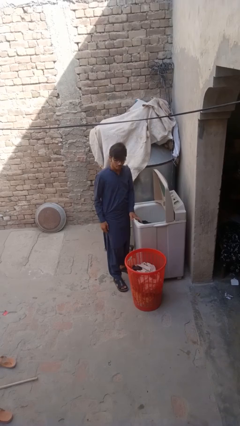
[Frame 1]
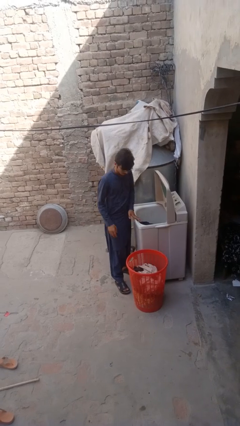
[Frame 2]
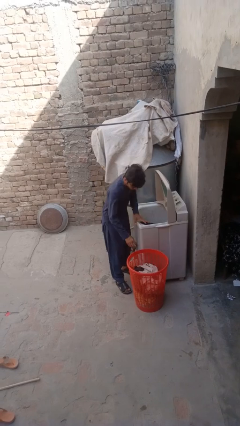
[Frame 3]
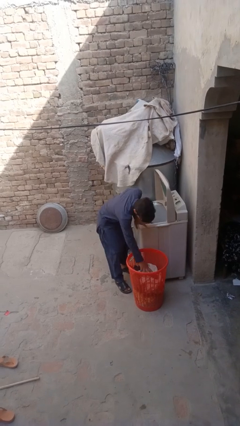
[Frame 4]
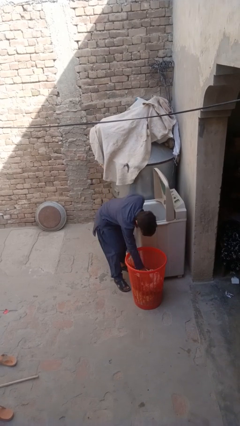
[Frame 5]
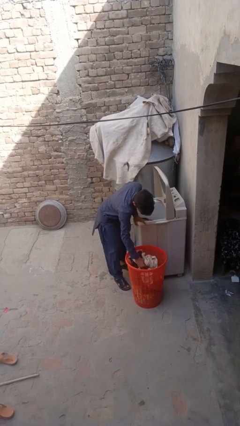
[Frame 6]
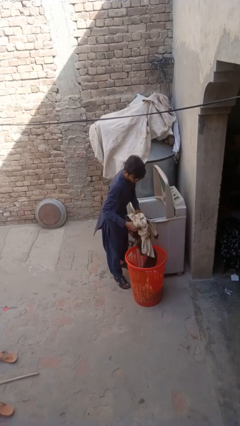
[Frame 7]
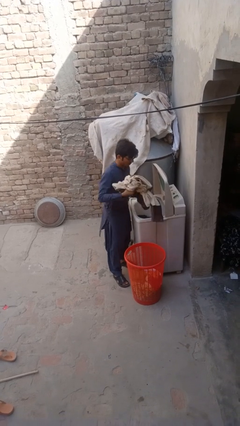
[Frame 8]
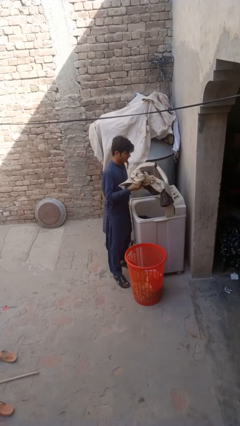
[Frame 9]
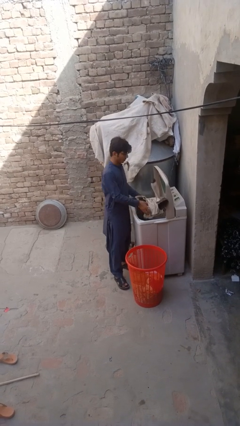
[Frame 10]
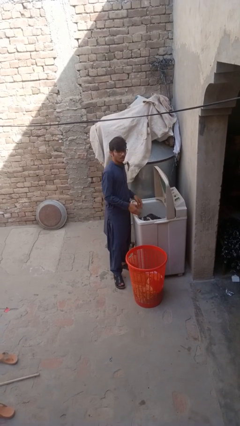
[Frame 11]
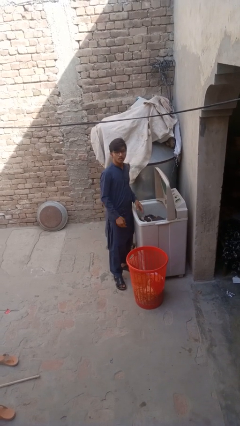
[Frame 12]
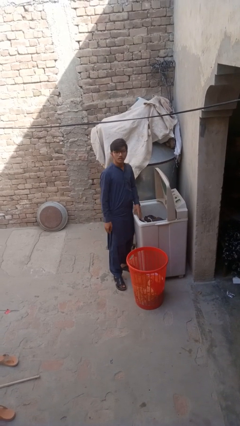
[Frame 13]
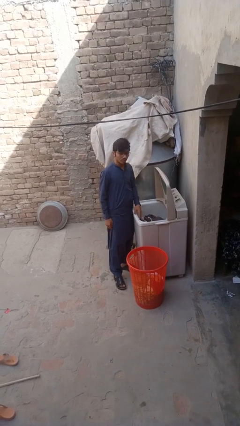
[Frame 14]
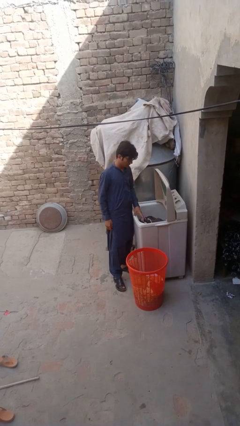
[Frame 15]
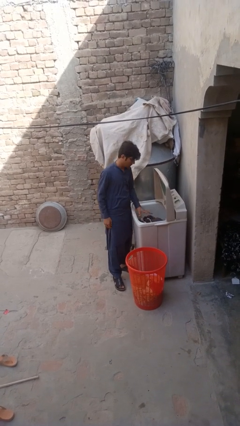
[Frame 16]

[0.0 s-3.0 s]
person loads clotheswasher

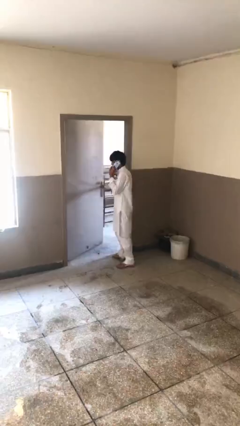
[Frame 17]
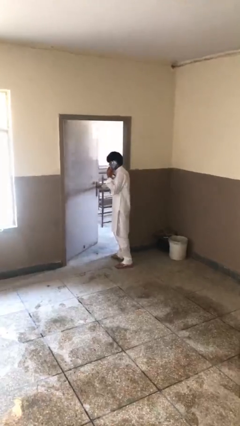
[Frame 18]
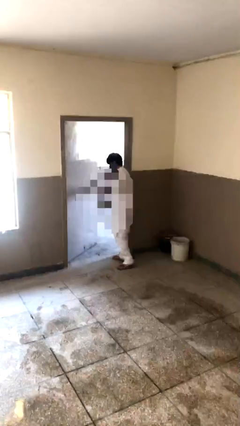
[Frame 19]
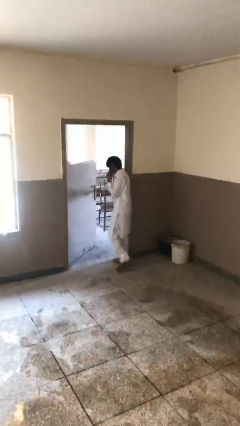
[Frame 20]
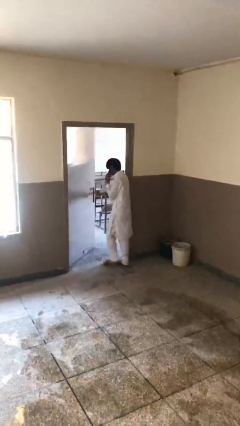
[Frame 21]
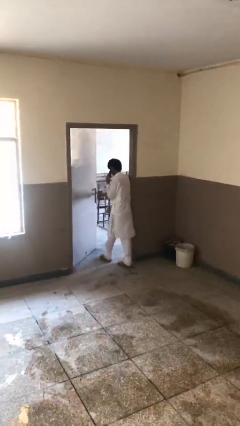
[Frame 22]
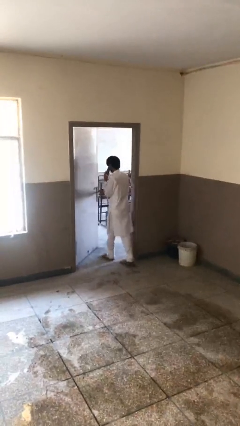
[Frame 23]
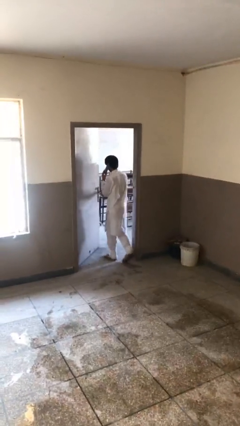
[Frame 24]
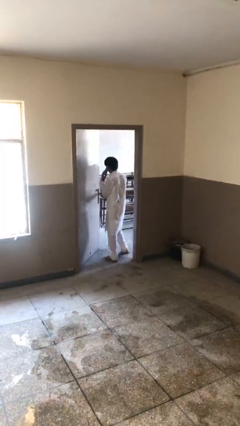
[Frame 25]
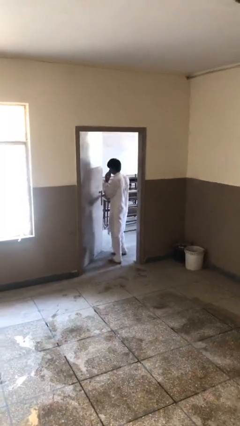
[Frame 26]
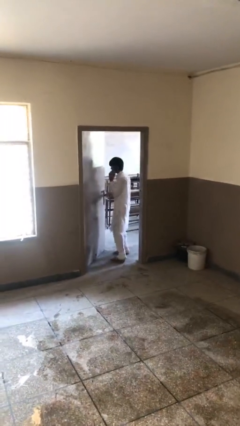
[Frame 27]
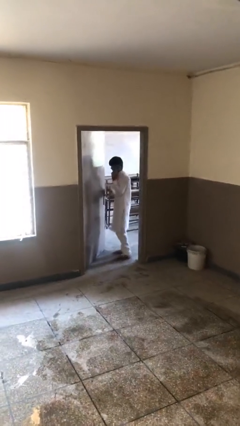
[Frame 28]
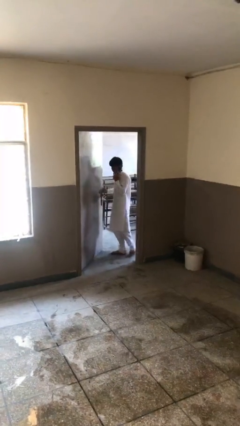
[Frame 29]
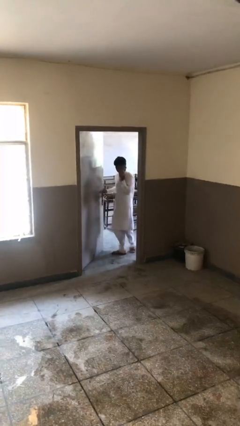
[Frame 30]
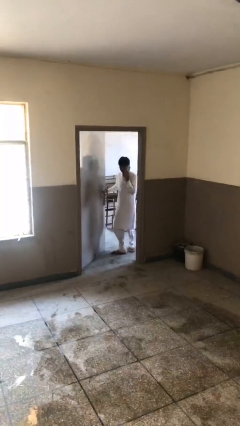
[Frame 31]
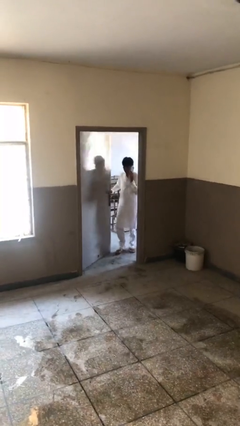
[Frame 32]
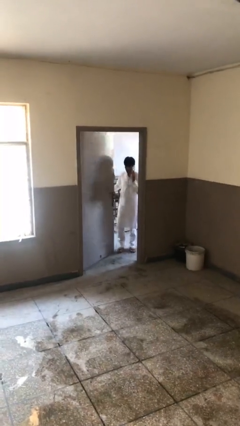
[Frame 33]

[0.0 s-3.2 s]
person exits scene through structure

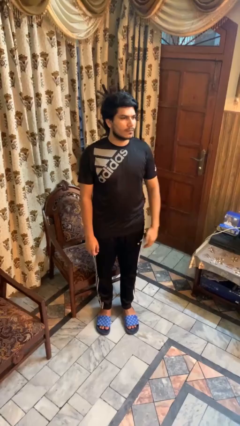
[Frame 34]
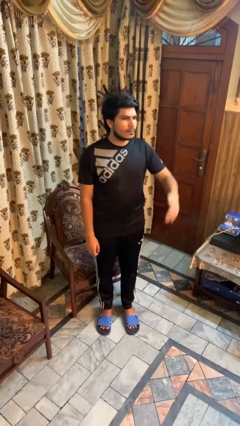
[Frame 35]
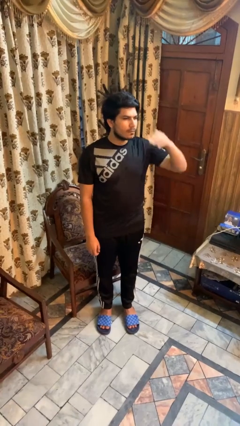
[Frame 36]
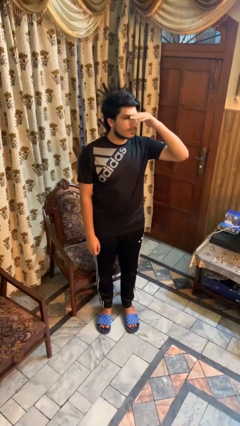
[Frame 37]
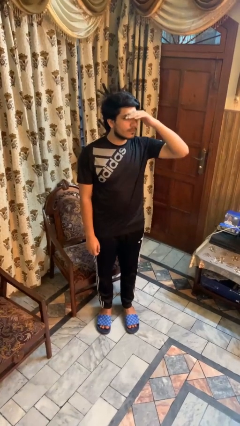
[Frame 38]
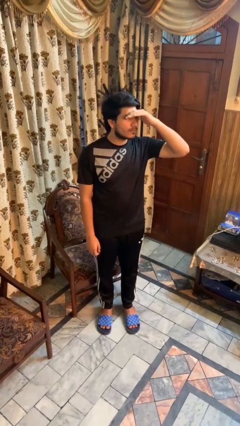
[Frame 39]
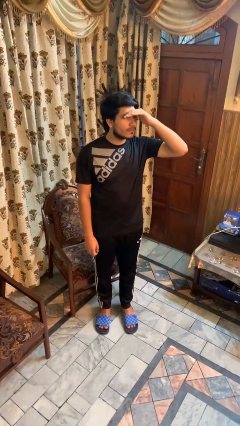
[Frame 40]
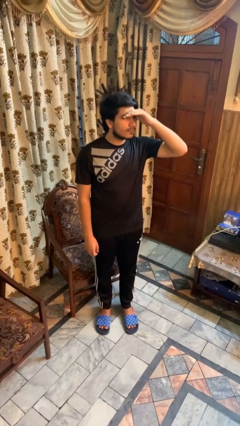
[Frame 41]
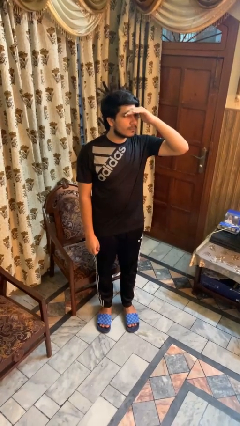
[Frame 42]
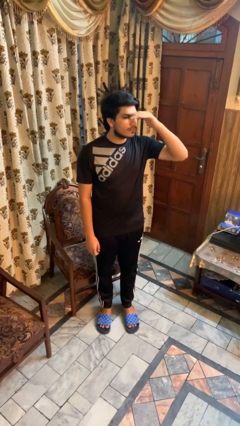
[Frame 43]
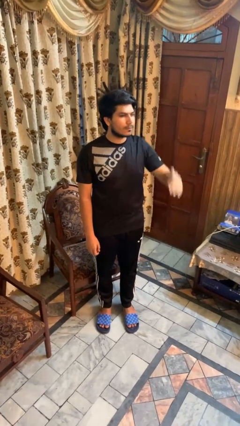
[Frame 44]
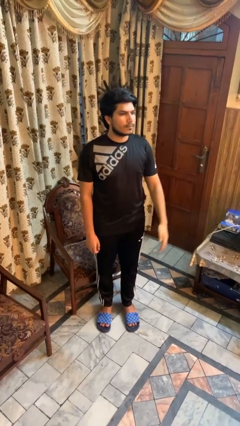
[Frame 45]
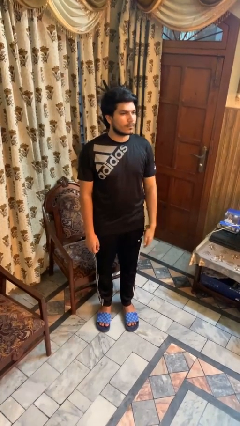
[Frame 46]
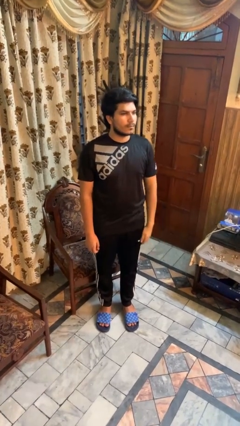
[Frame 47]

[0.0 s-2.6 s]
person shades eyes

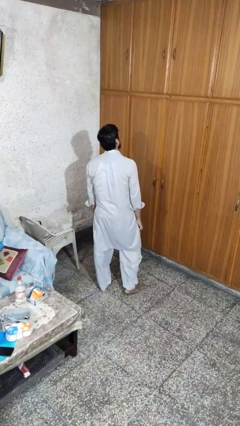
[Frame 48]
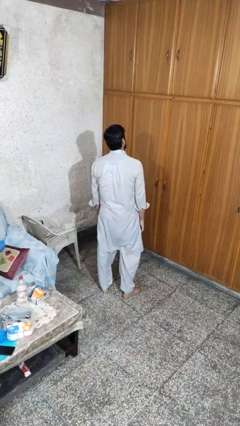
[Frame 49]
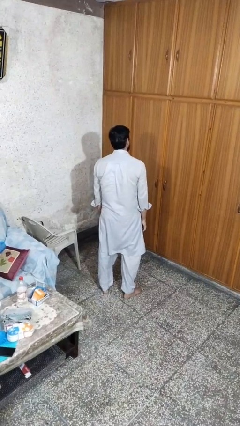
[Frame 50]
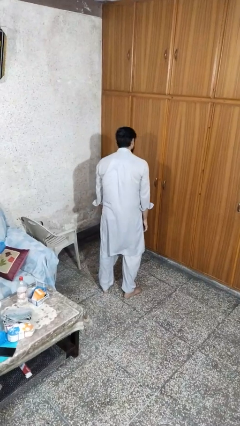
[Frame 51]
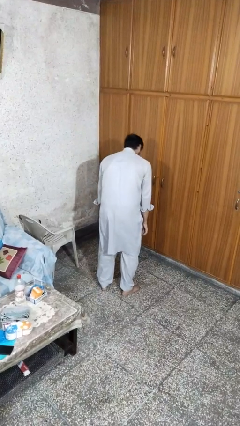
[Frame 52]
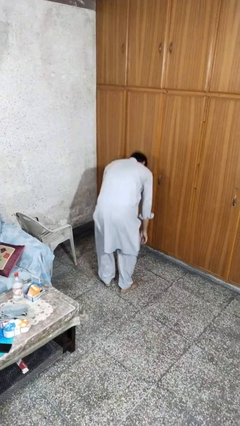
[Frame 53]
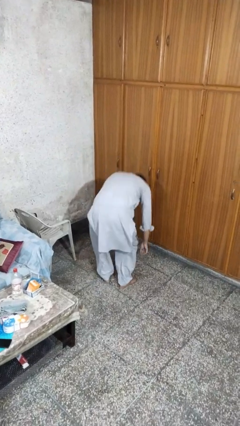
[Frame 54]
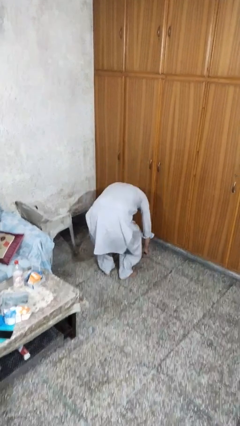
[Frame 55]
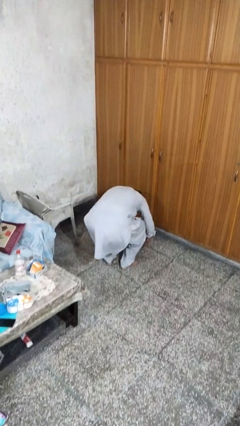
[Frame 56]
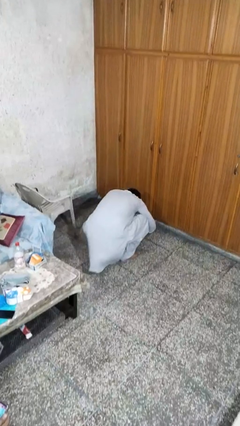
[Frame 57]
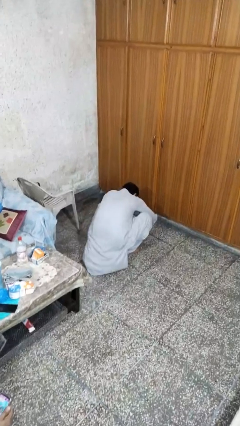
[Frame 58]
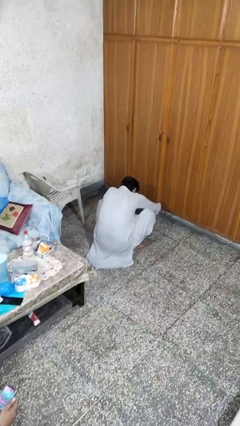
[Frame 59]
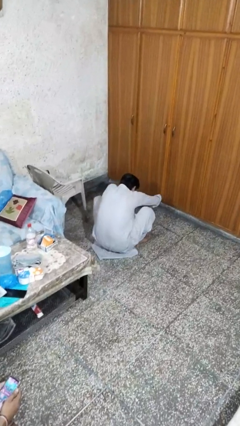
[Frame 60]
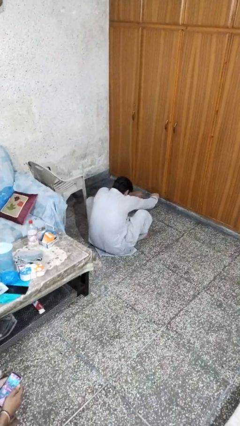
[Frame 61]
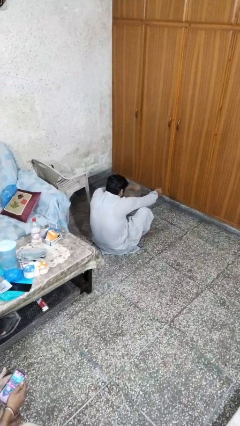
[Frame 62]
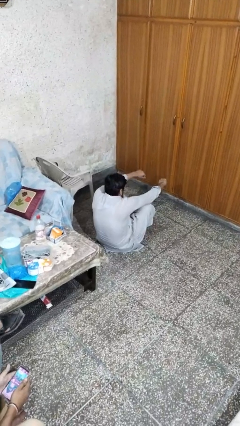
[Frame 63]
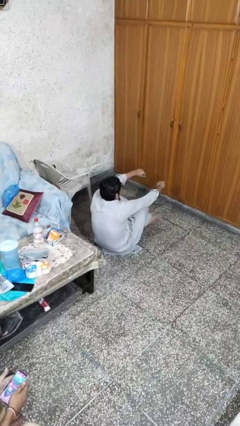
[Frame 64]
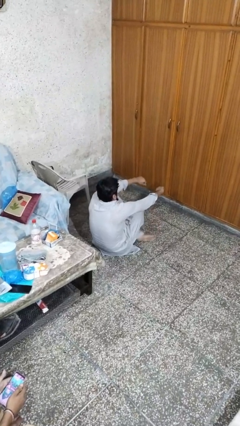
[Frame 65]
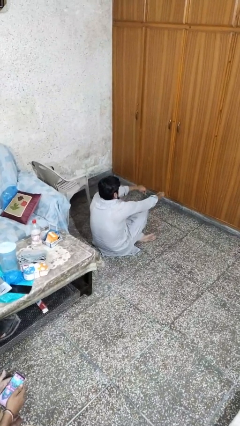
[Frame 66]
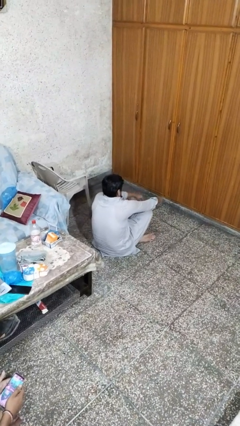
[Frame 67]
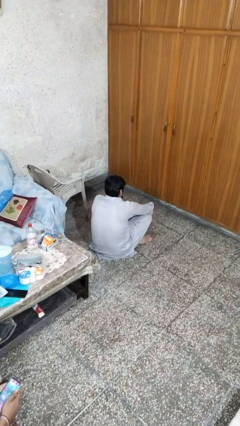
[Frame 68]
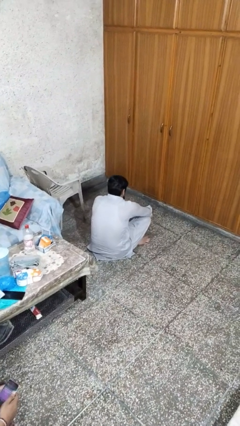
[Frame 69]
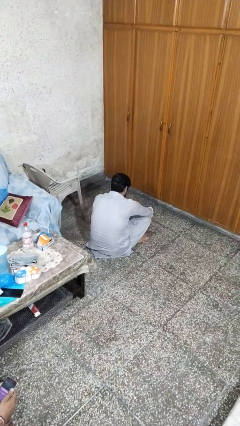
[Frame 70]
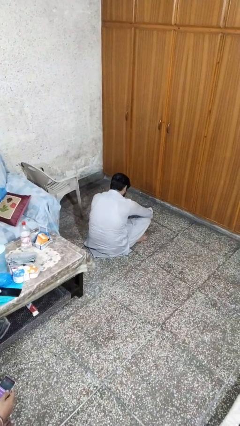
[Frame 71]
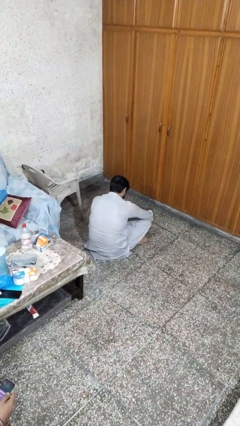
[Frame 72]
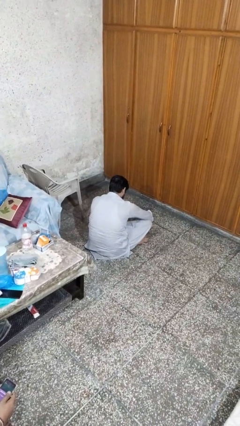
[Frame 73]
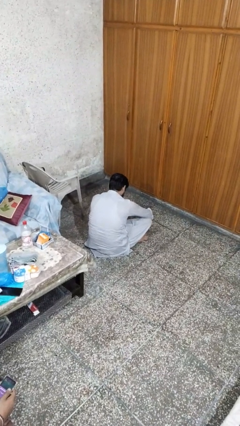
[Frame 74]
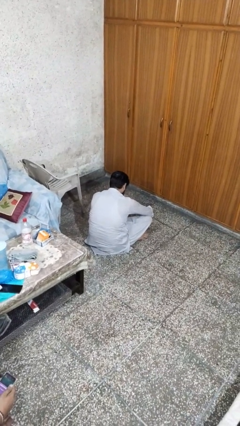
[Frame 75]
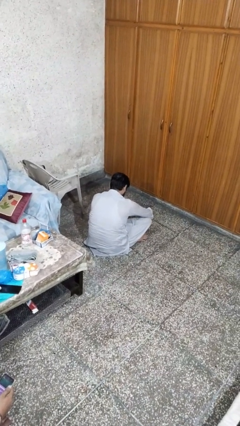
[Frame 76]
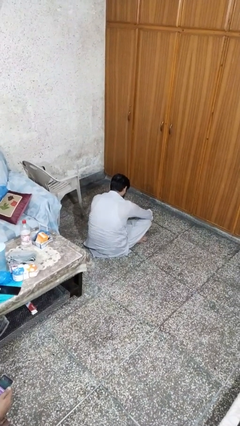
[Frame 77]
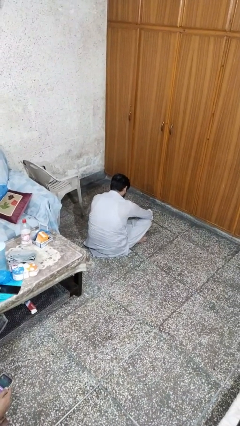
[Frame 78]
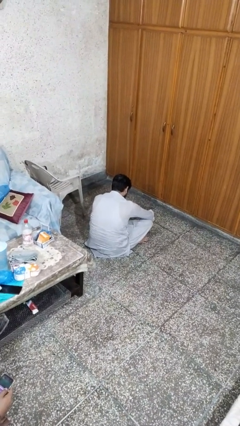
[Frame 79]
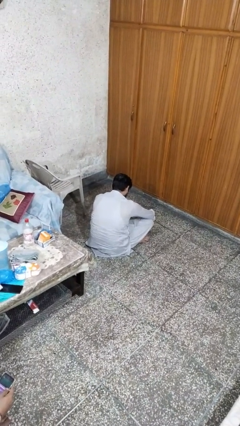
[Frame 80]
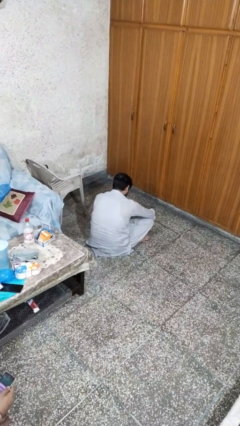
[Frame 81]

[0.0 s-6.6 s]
person sits crisscross

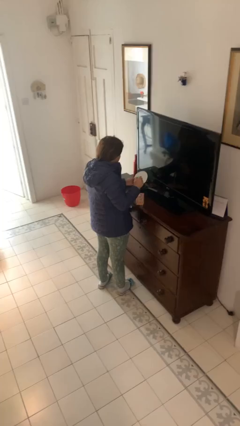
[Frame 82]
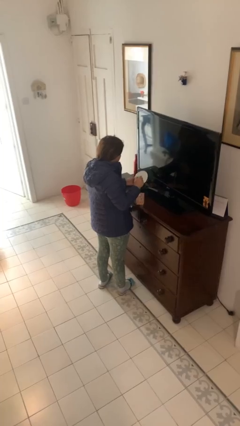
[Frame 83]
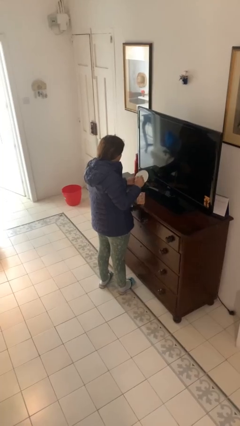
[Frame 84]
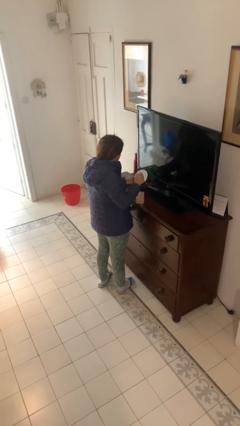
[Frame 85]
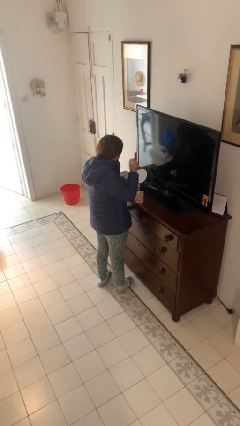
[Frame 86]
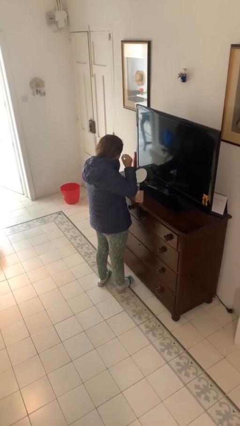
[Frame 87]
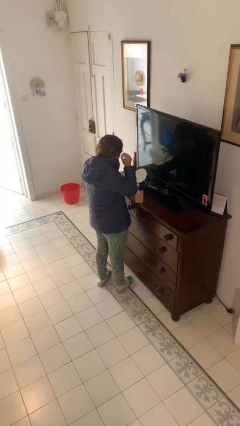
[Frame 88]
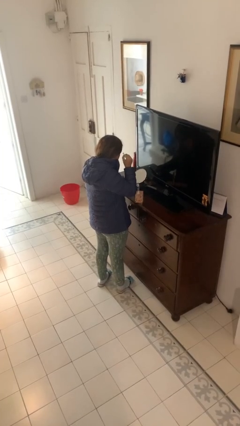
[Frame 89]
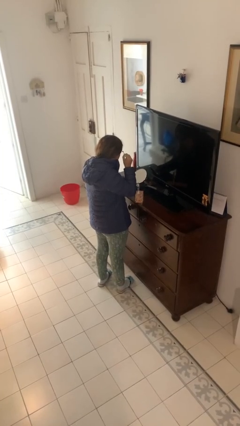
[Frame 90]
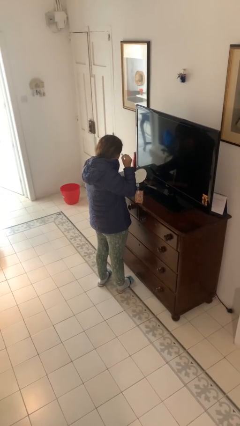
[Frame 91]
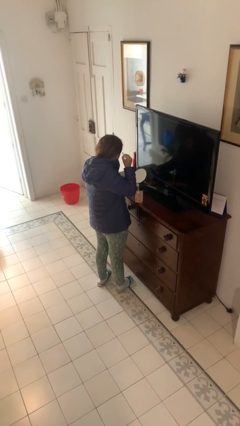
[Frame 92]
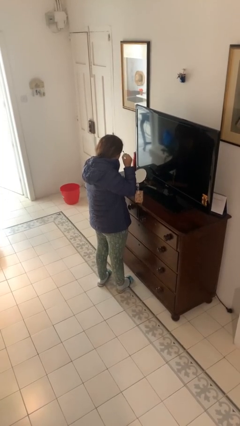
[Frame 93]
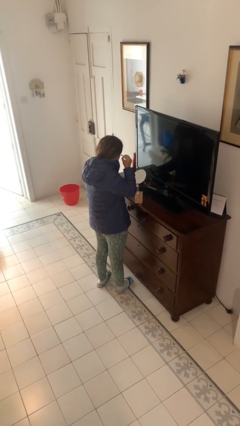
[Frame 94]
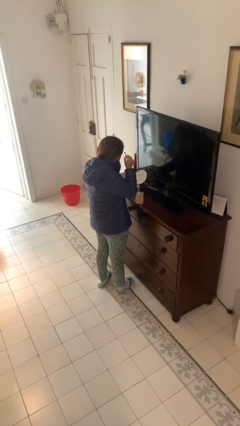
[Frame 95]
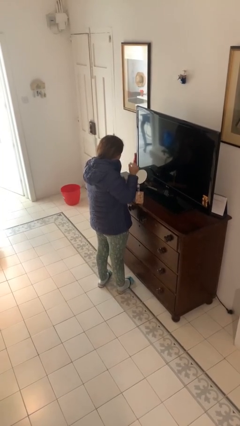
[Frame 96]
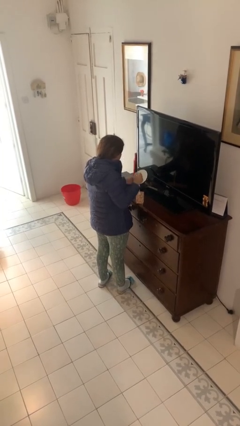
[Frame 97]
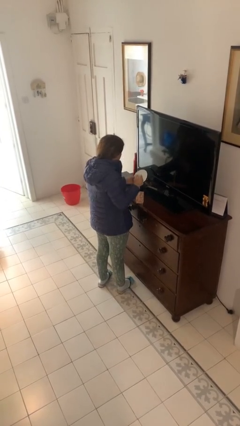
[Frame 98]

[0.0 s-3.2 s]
person applies eye makeup
